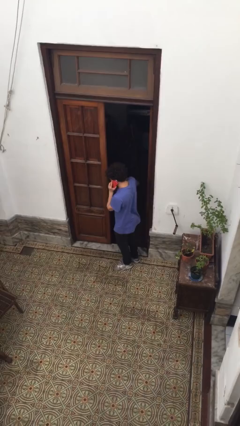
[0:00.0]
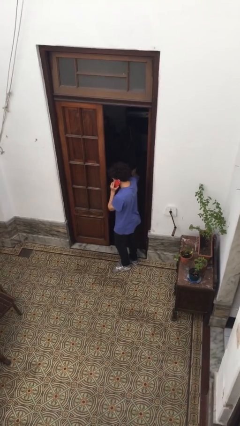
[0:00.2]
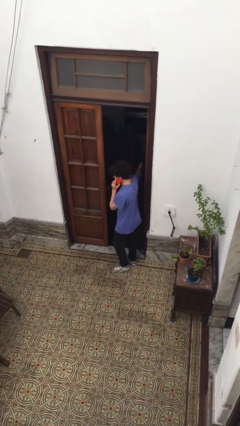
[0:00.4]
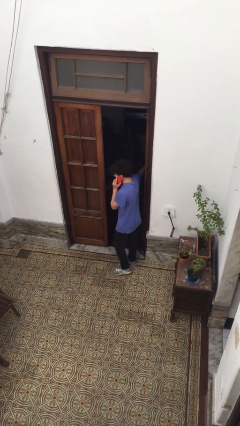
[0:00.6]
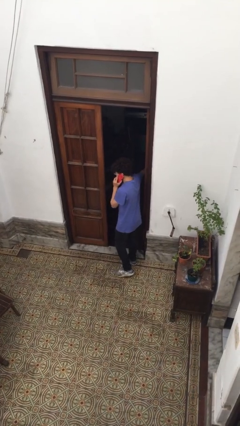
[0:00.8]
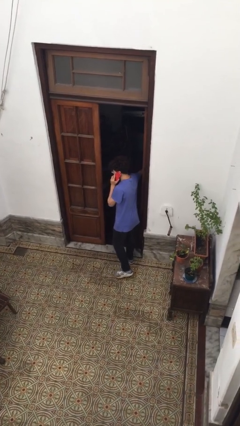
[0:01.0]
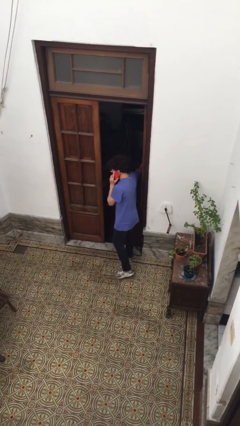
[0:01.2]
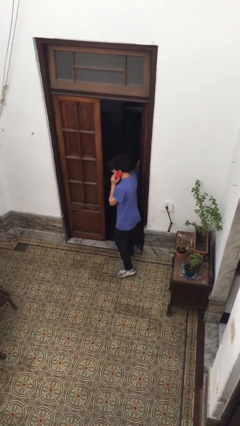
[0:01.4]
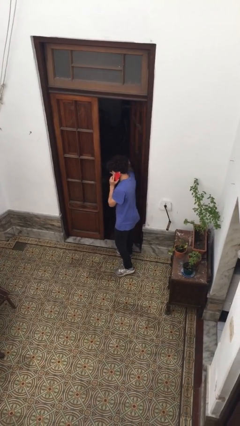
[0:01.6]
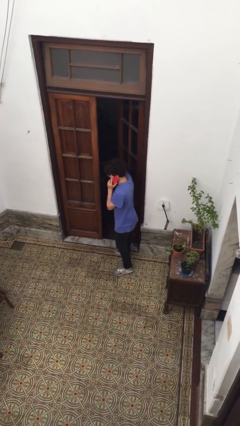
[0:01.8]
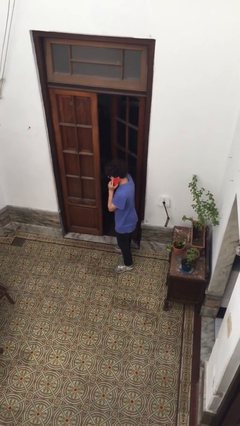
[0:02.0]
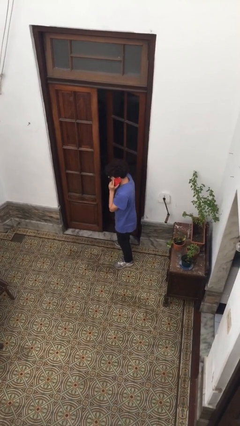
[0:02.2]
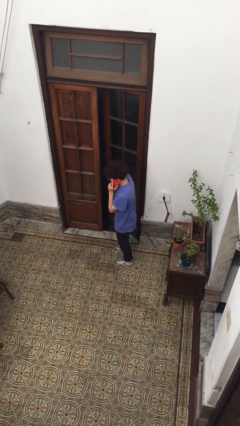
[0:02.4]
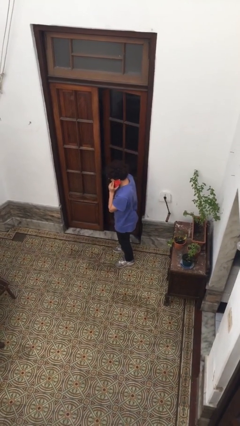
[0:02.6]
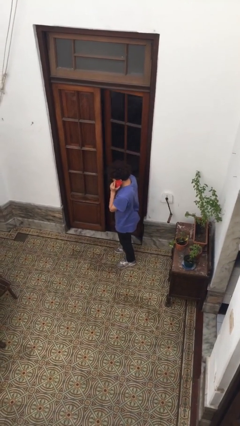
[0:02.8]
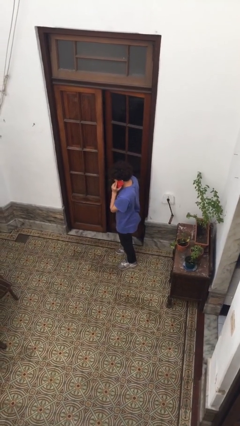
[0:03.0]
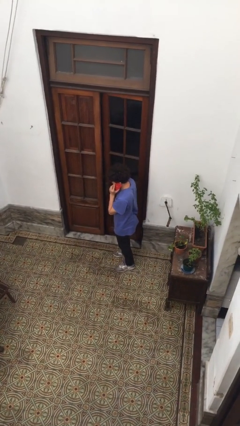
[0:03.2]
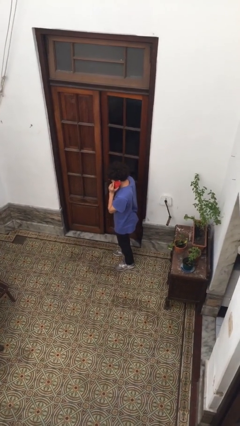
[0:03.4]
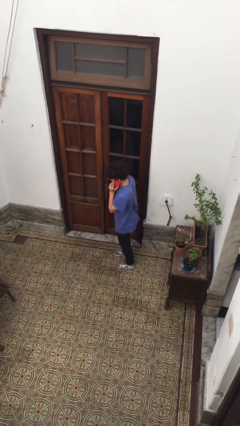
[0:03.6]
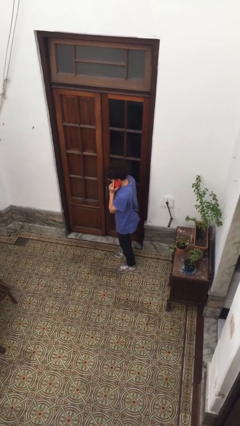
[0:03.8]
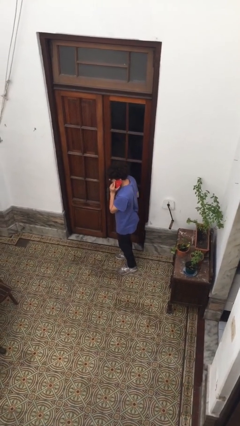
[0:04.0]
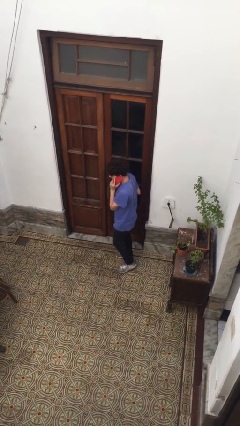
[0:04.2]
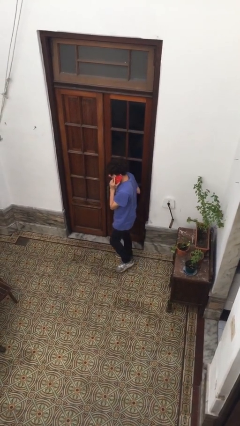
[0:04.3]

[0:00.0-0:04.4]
person closes facility door

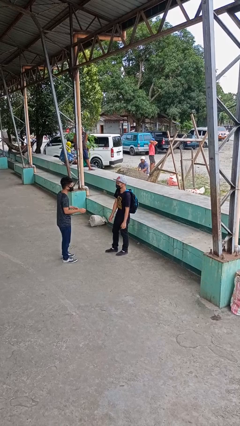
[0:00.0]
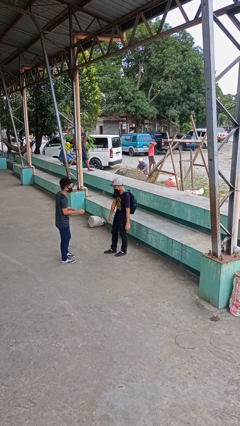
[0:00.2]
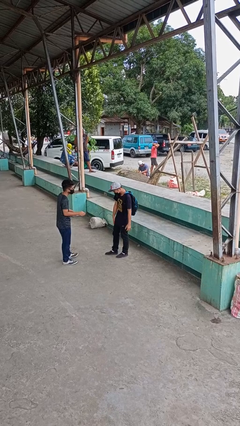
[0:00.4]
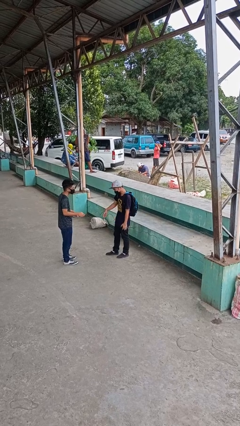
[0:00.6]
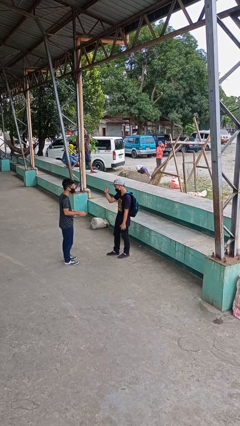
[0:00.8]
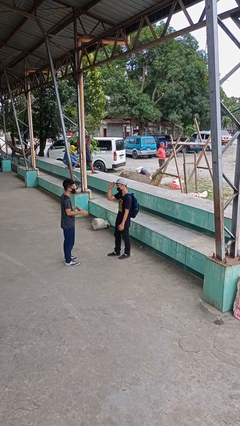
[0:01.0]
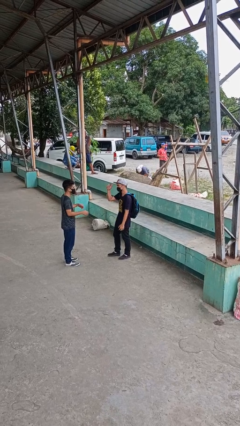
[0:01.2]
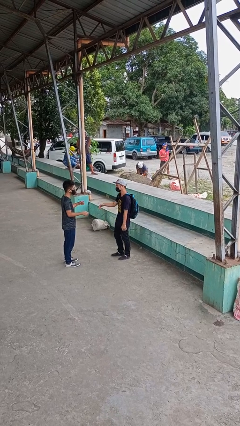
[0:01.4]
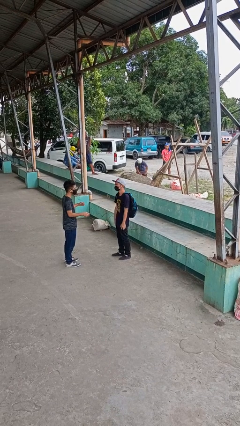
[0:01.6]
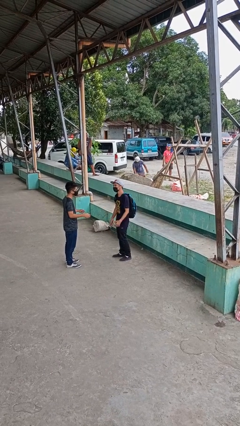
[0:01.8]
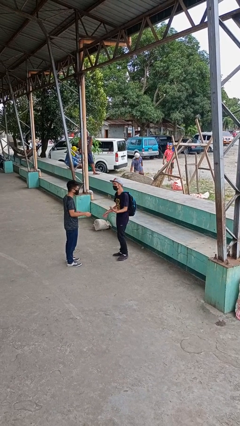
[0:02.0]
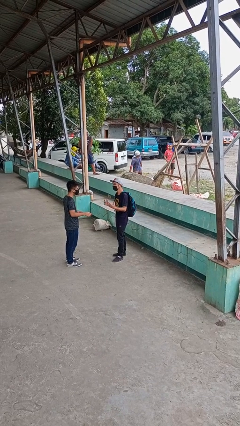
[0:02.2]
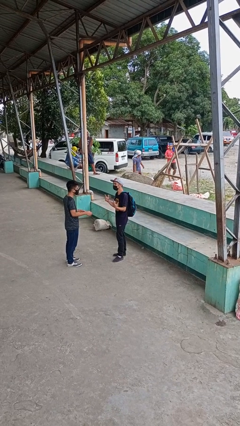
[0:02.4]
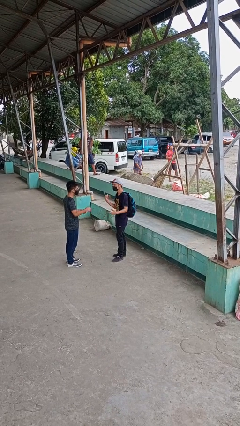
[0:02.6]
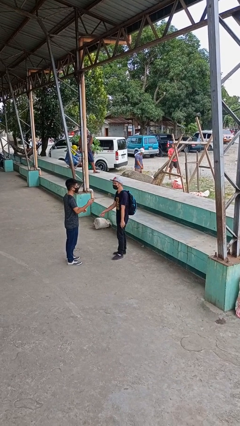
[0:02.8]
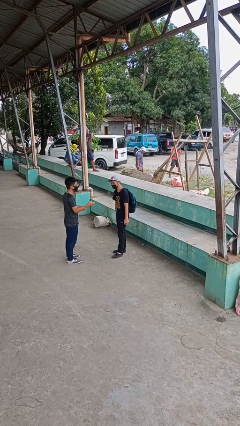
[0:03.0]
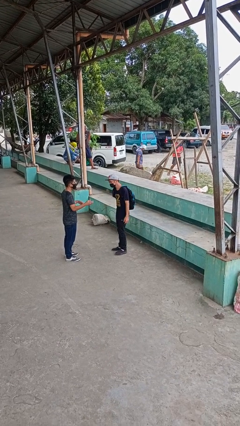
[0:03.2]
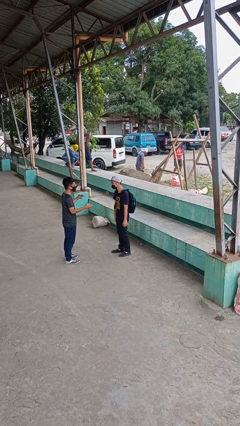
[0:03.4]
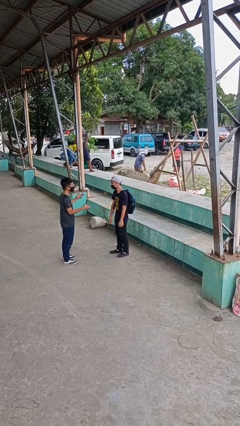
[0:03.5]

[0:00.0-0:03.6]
person talks to person

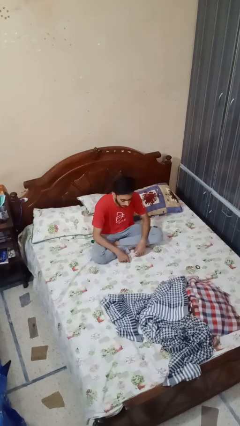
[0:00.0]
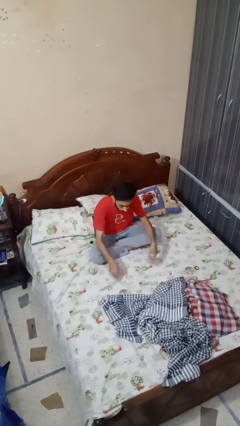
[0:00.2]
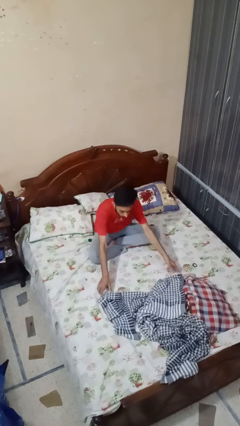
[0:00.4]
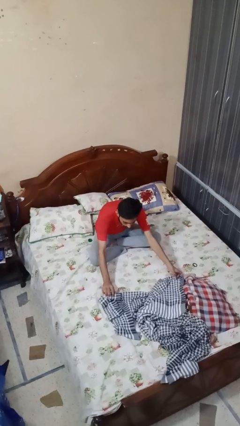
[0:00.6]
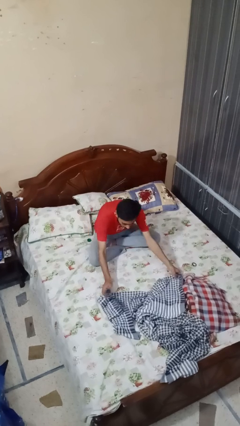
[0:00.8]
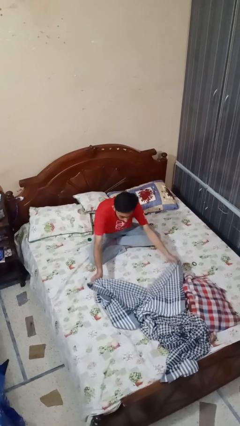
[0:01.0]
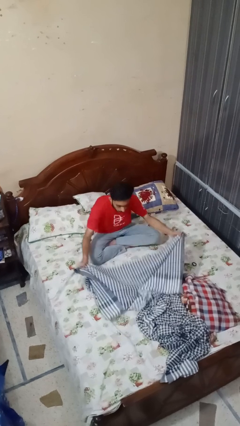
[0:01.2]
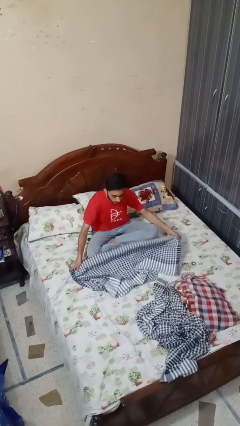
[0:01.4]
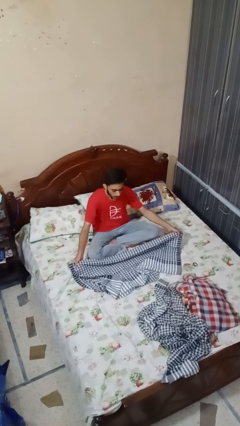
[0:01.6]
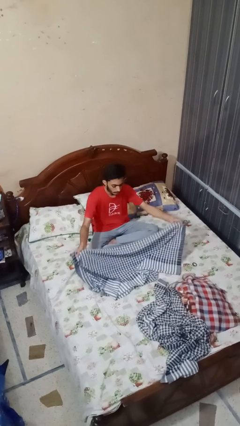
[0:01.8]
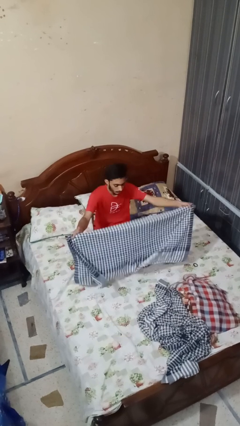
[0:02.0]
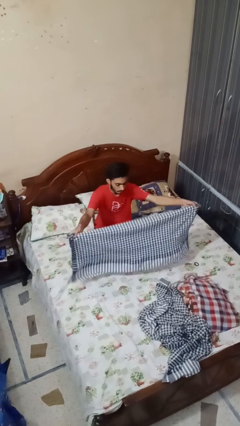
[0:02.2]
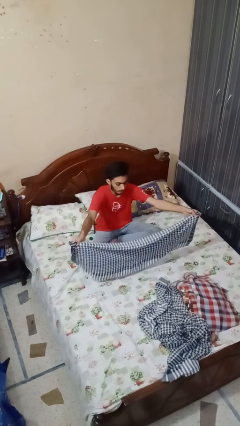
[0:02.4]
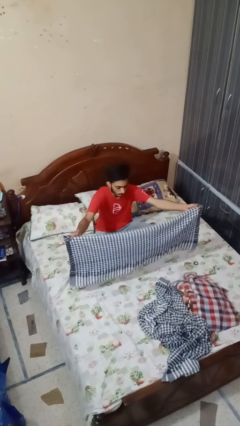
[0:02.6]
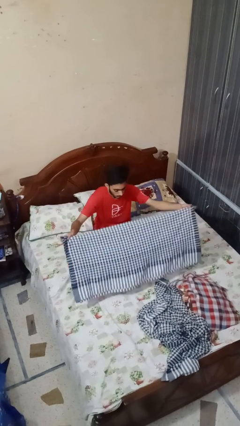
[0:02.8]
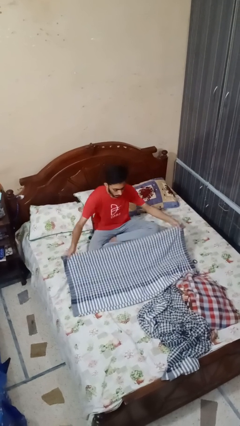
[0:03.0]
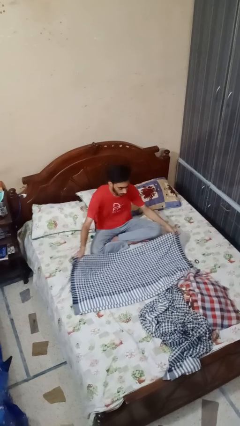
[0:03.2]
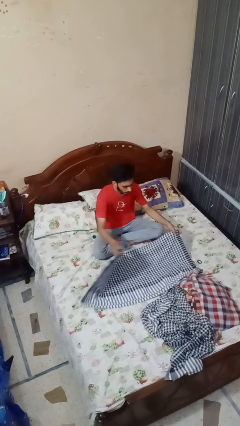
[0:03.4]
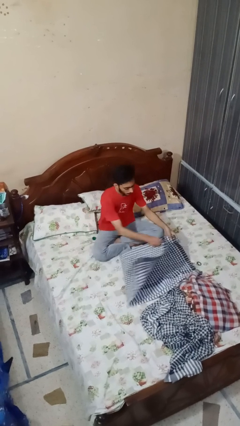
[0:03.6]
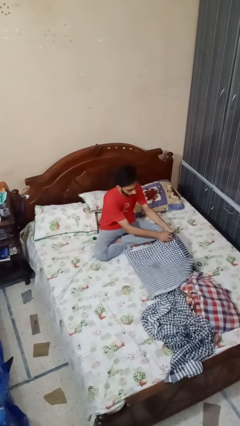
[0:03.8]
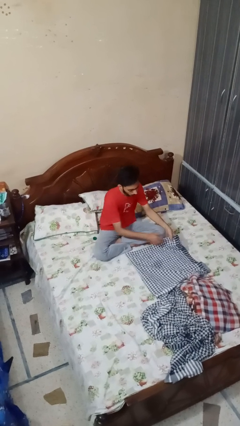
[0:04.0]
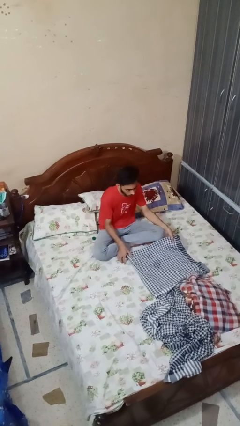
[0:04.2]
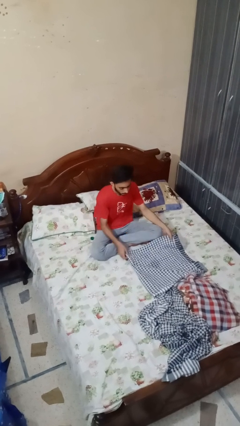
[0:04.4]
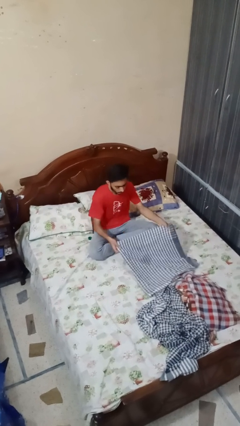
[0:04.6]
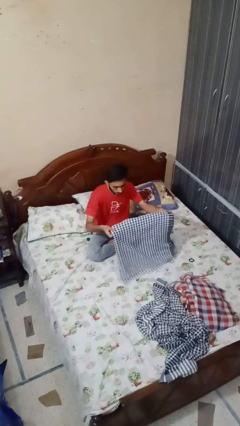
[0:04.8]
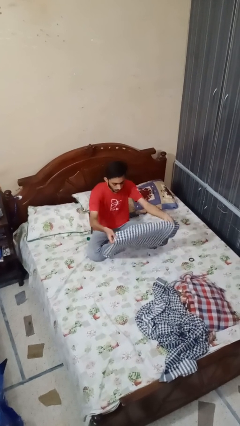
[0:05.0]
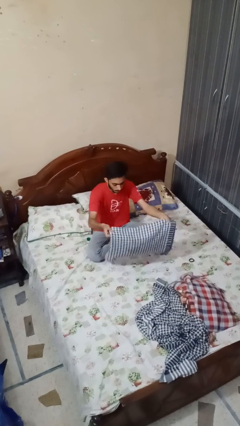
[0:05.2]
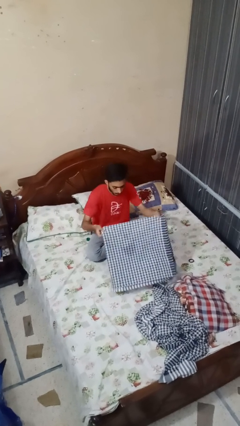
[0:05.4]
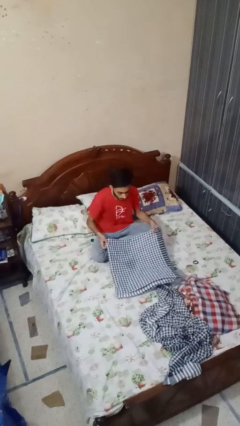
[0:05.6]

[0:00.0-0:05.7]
person folds blanket

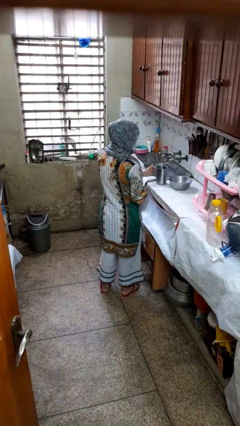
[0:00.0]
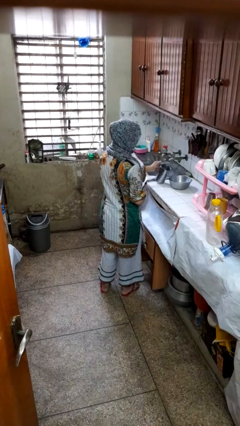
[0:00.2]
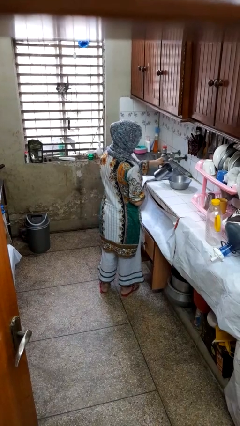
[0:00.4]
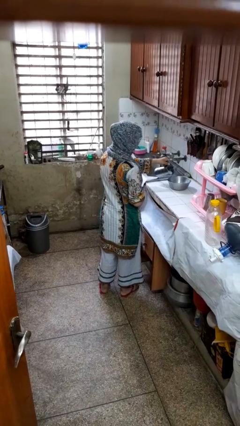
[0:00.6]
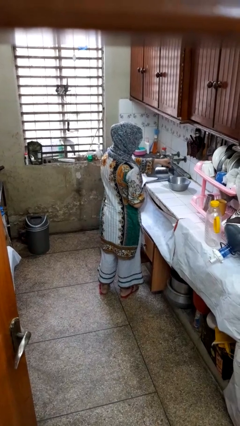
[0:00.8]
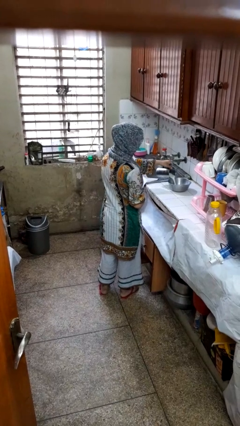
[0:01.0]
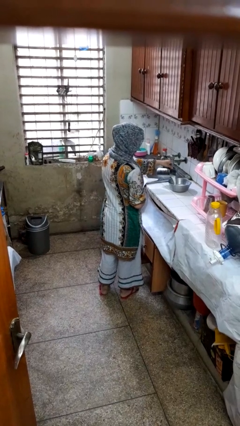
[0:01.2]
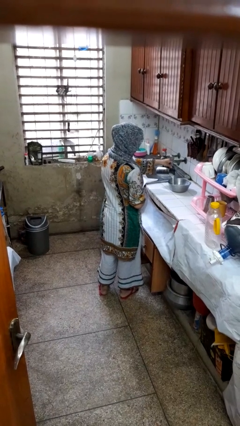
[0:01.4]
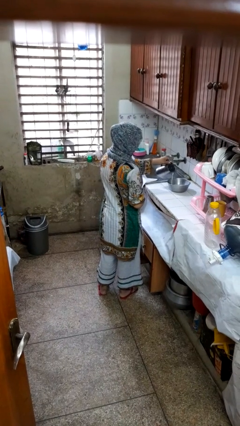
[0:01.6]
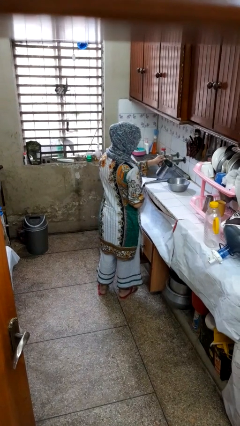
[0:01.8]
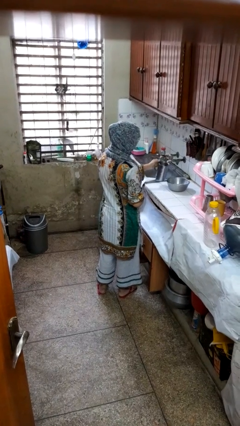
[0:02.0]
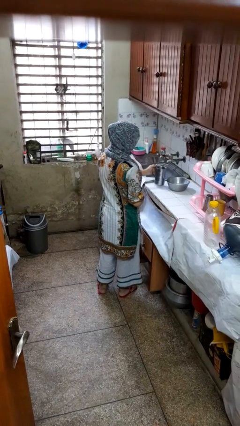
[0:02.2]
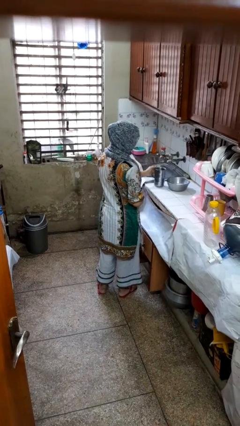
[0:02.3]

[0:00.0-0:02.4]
person pours into bowl

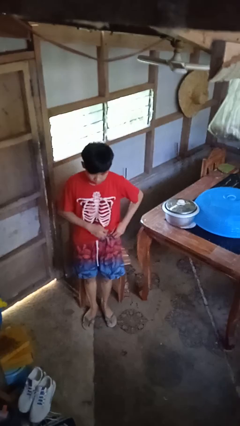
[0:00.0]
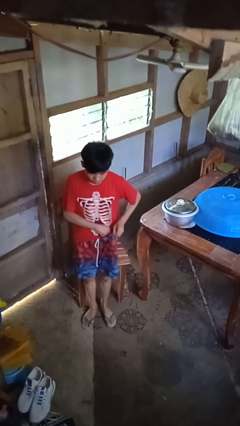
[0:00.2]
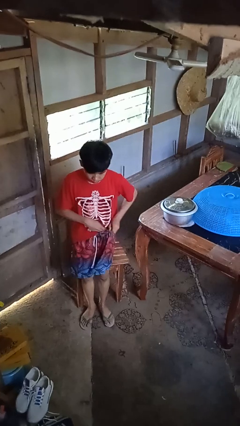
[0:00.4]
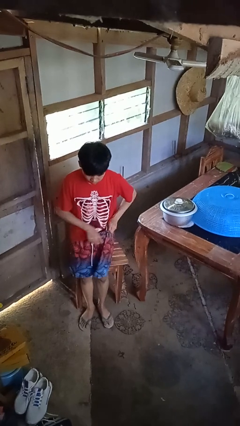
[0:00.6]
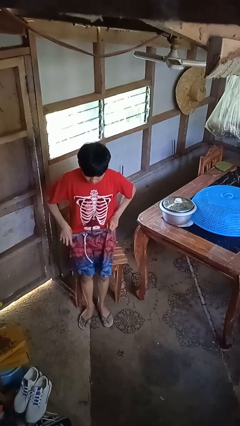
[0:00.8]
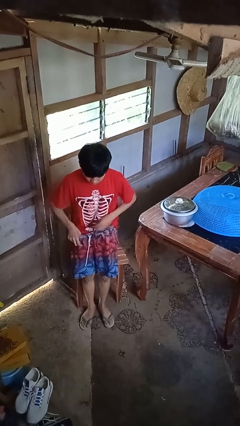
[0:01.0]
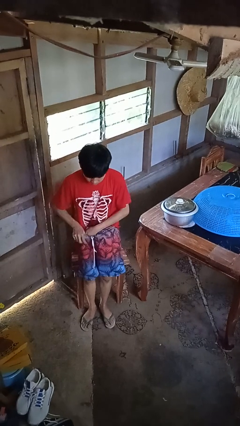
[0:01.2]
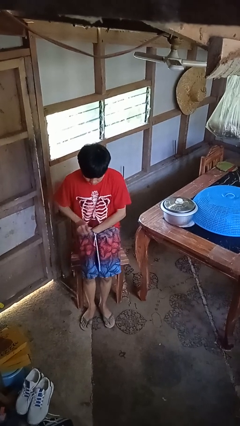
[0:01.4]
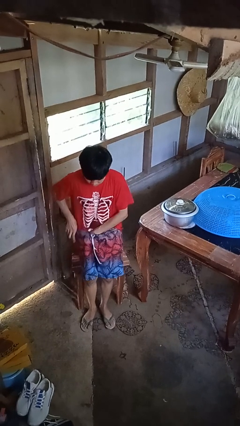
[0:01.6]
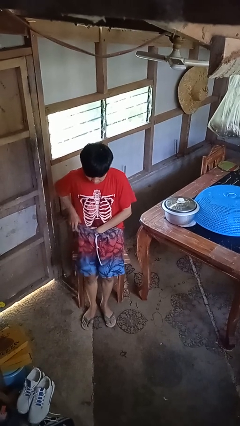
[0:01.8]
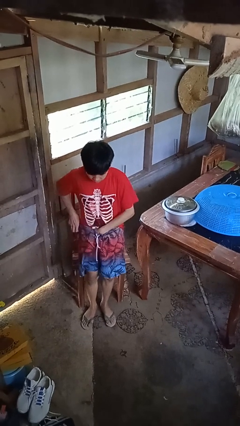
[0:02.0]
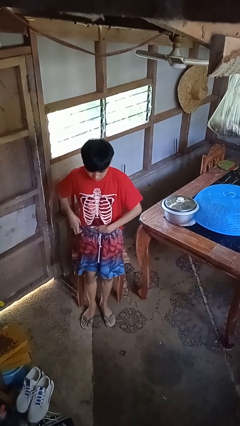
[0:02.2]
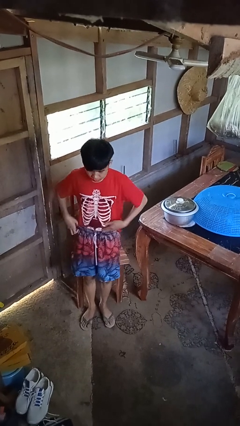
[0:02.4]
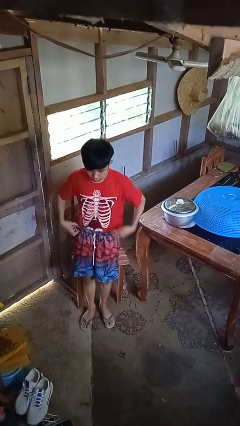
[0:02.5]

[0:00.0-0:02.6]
person tucks in shirt
